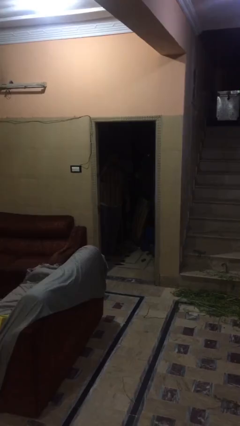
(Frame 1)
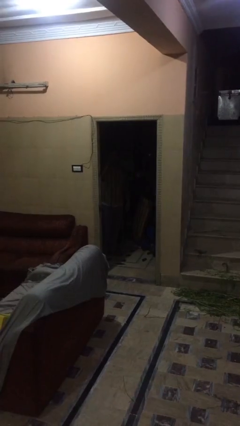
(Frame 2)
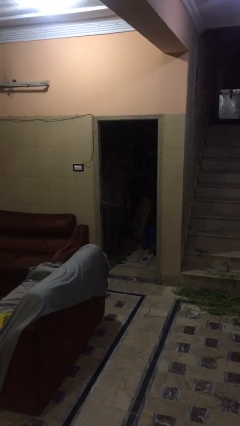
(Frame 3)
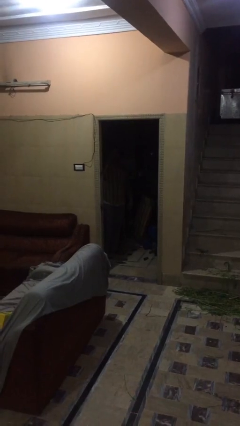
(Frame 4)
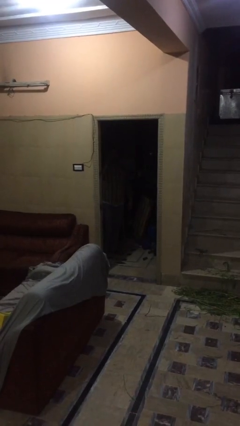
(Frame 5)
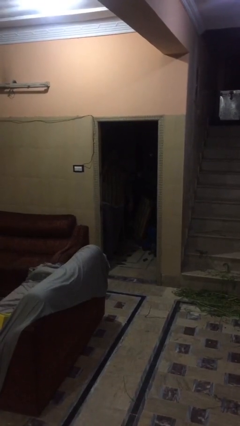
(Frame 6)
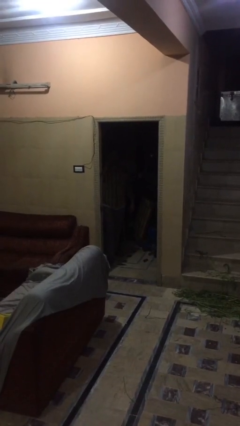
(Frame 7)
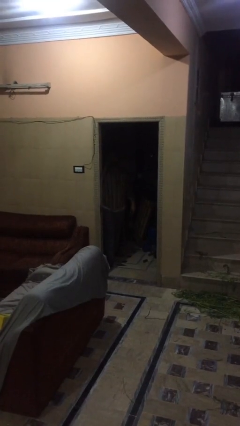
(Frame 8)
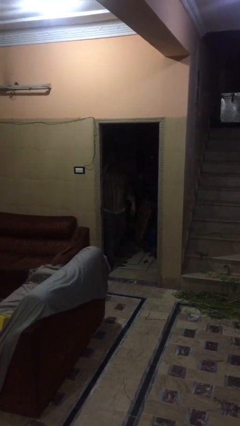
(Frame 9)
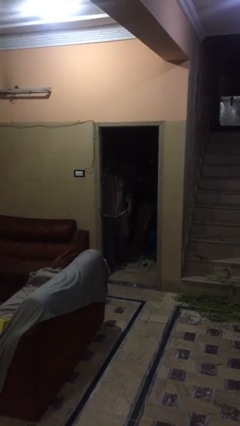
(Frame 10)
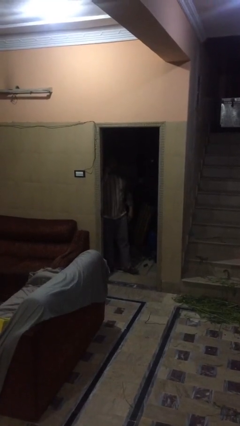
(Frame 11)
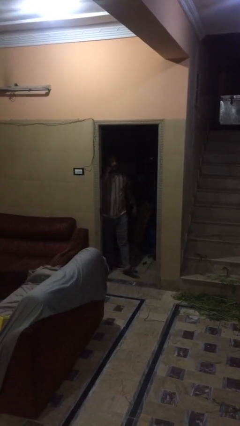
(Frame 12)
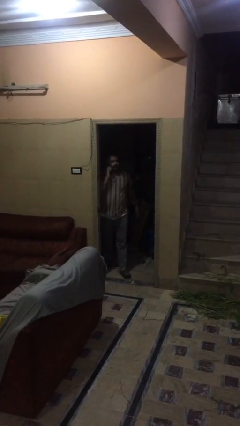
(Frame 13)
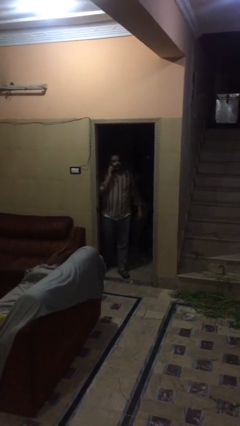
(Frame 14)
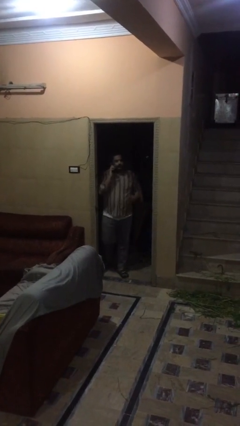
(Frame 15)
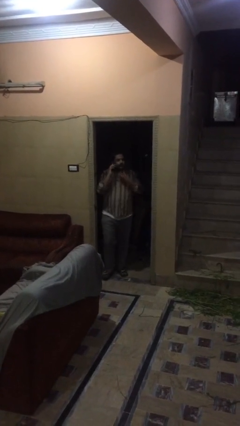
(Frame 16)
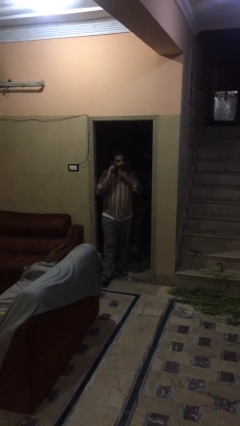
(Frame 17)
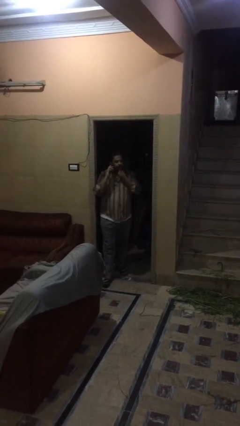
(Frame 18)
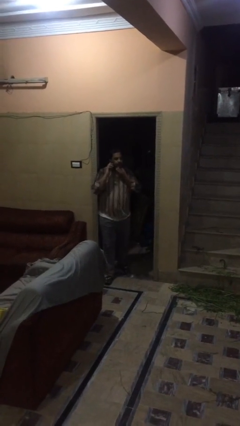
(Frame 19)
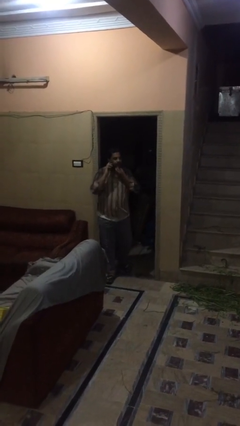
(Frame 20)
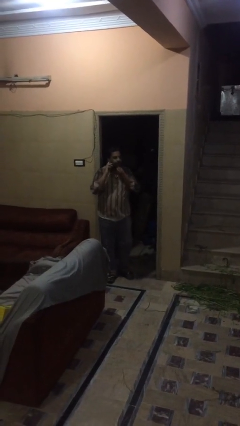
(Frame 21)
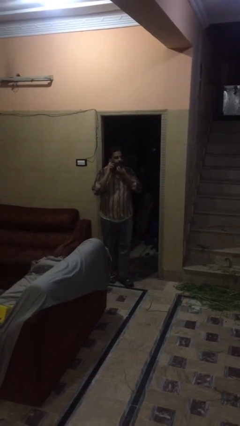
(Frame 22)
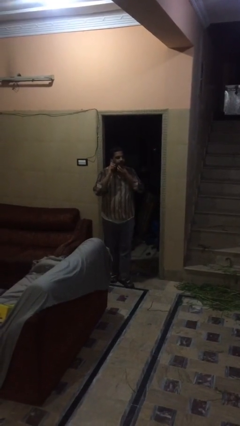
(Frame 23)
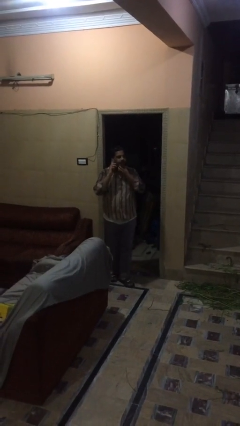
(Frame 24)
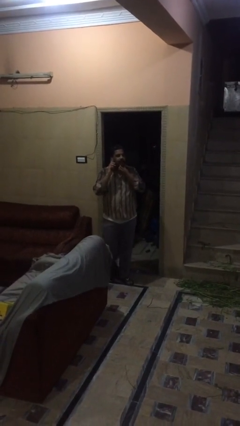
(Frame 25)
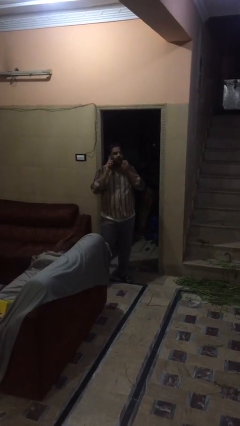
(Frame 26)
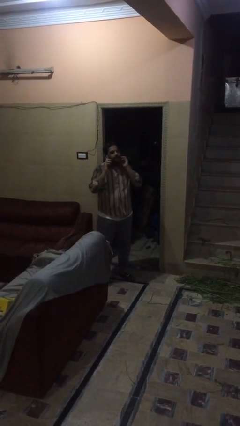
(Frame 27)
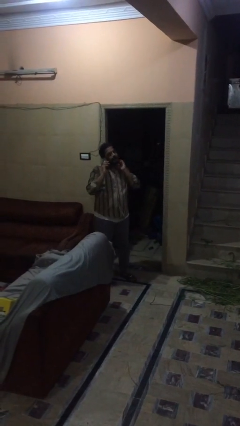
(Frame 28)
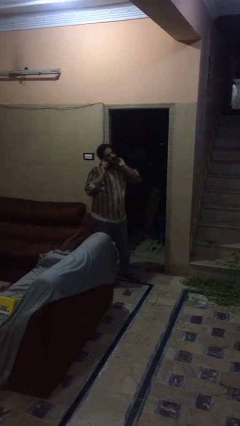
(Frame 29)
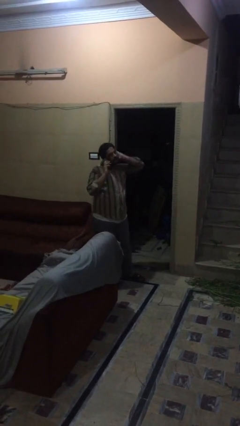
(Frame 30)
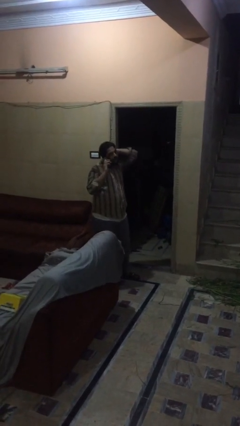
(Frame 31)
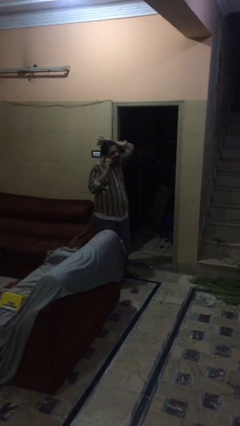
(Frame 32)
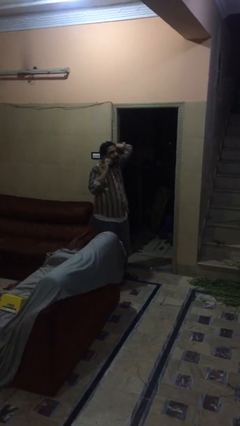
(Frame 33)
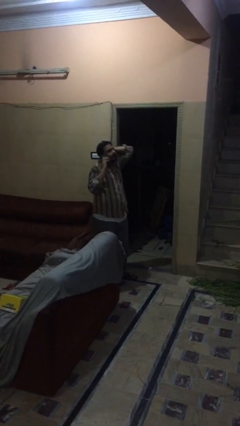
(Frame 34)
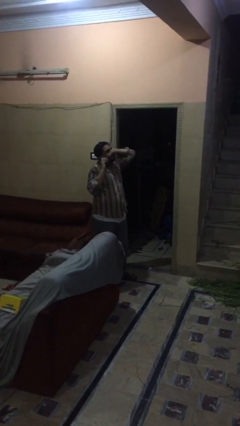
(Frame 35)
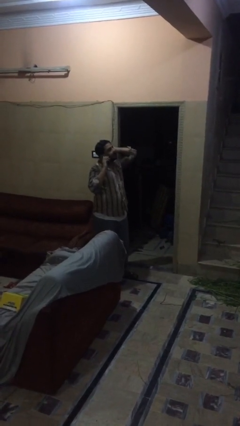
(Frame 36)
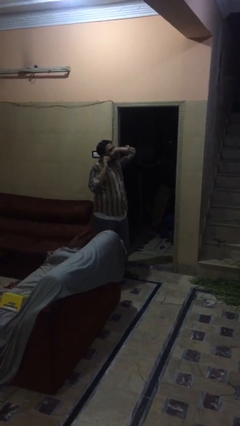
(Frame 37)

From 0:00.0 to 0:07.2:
person enters scene through structure

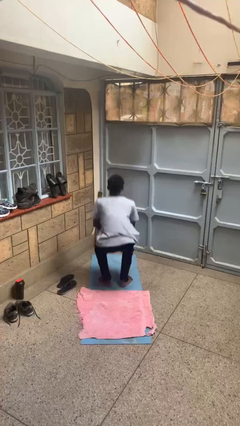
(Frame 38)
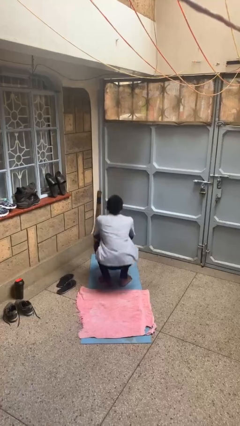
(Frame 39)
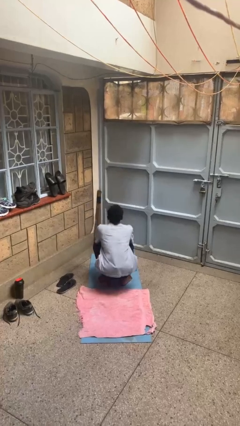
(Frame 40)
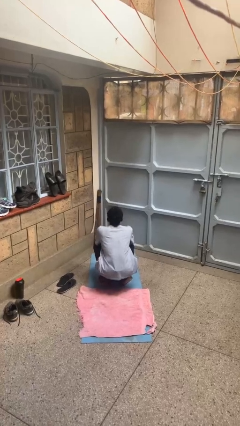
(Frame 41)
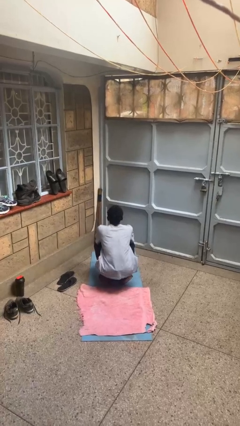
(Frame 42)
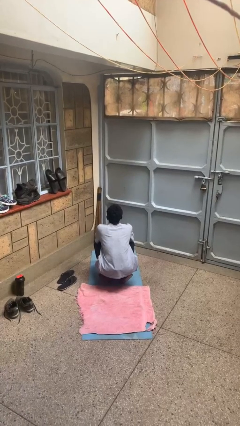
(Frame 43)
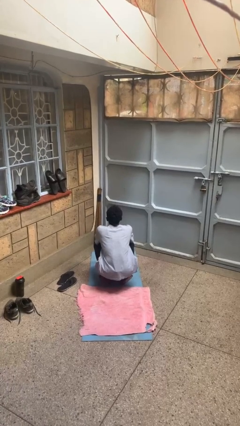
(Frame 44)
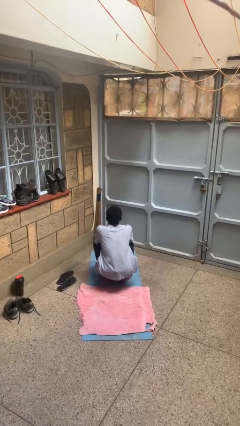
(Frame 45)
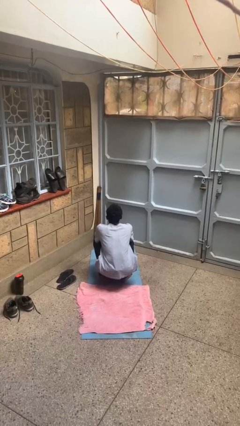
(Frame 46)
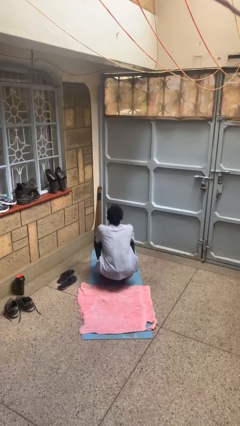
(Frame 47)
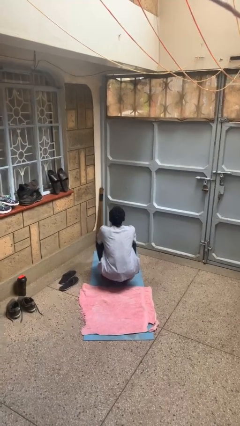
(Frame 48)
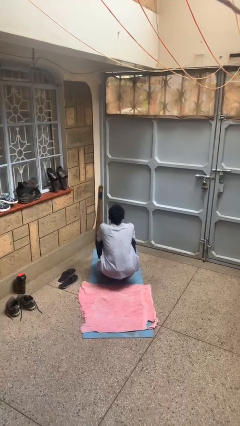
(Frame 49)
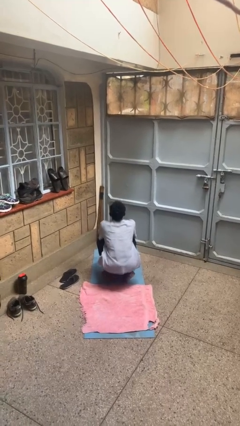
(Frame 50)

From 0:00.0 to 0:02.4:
person squats

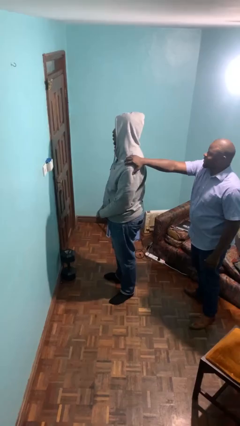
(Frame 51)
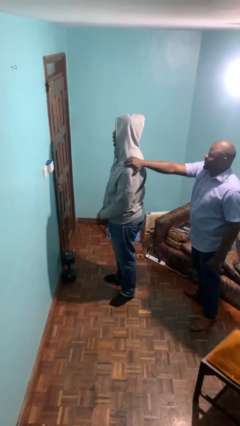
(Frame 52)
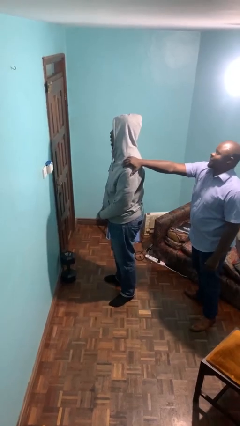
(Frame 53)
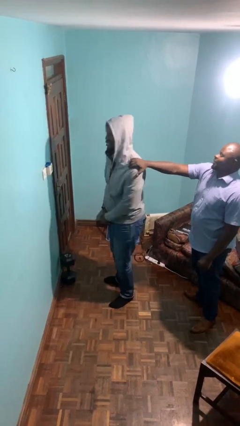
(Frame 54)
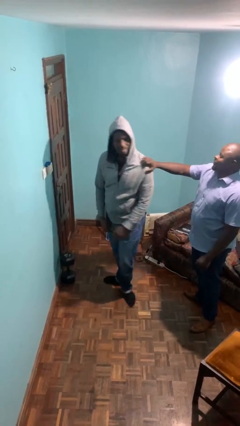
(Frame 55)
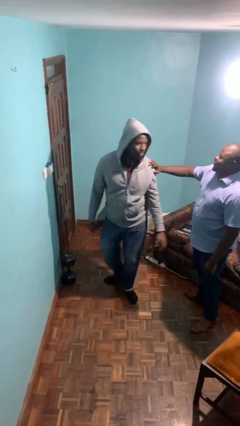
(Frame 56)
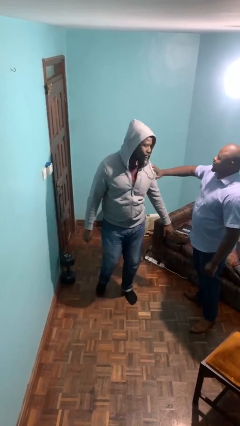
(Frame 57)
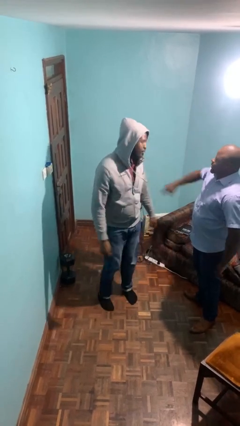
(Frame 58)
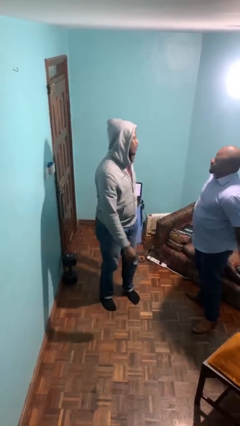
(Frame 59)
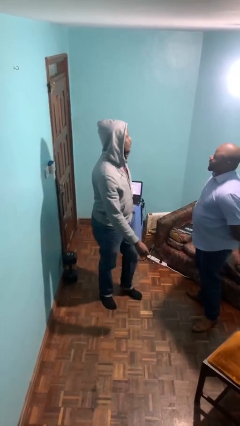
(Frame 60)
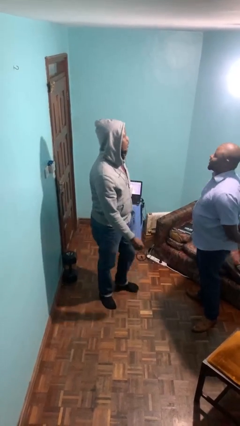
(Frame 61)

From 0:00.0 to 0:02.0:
person spins person around

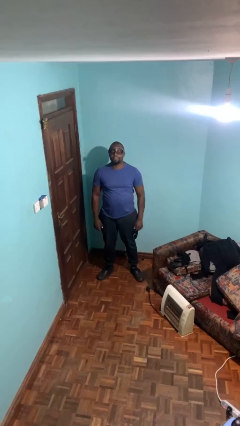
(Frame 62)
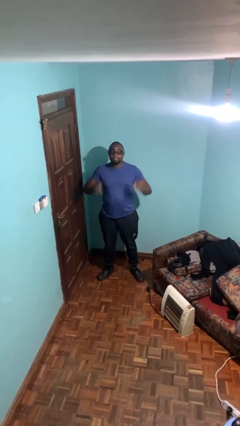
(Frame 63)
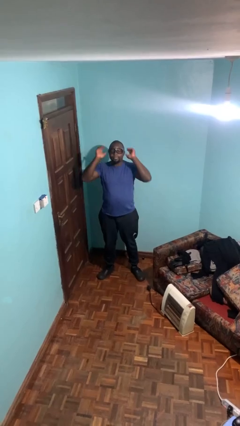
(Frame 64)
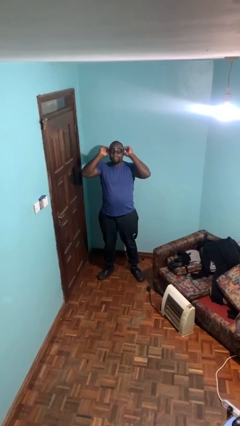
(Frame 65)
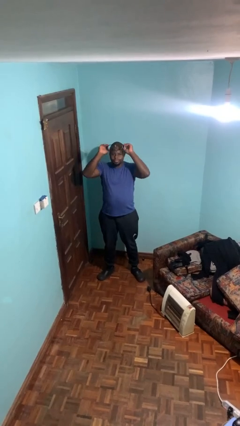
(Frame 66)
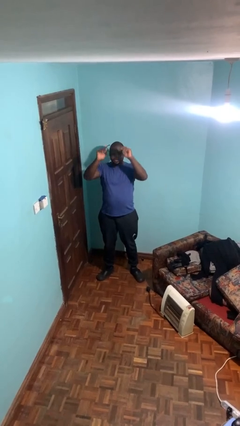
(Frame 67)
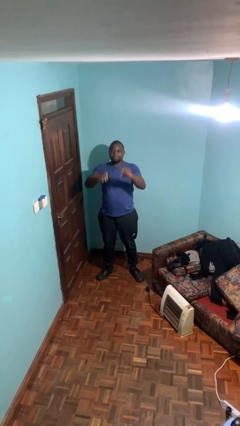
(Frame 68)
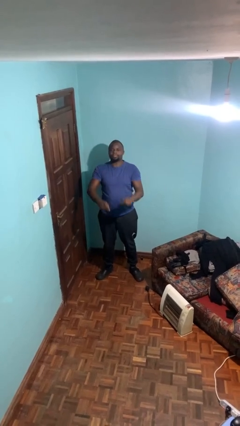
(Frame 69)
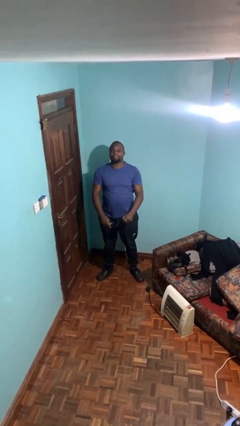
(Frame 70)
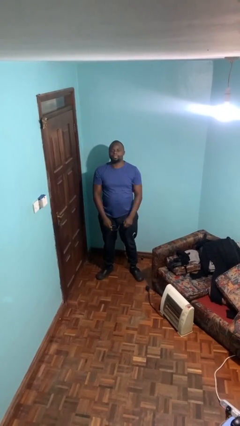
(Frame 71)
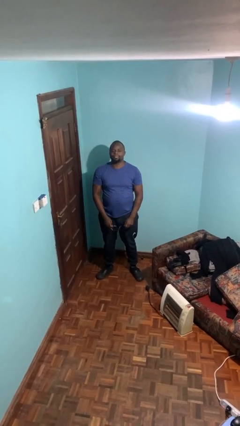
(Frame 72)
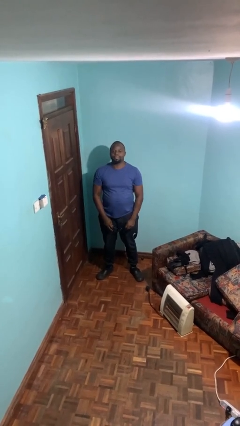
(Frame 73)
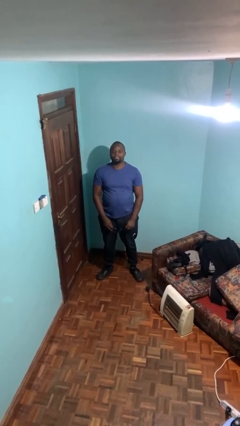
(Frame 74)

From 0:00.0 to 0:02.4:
person takes off glasses

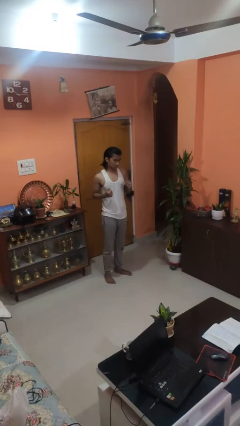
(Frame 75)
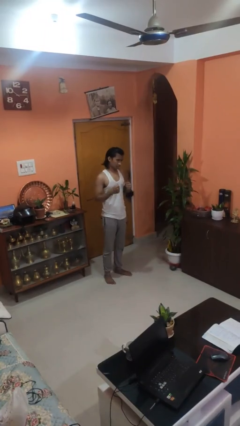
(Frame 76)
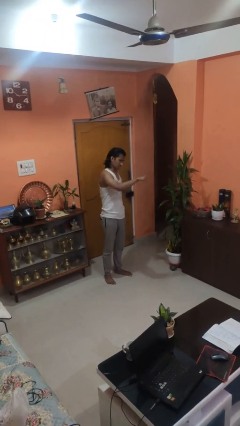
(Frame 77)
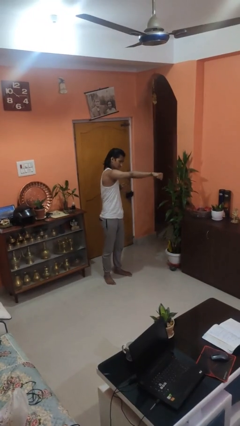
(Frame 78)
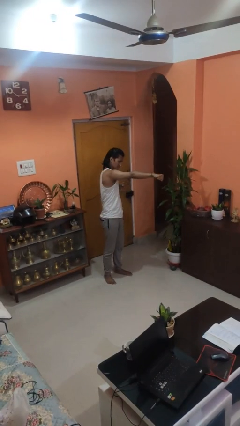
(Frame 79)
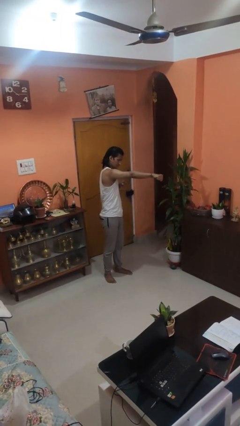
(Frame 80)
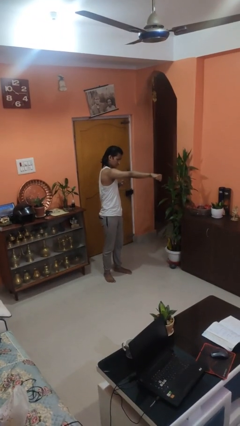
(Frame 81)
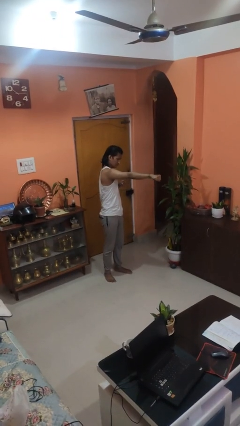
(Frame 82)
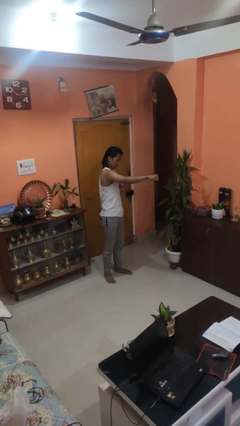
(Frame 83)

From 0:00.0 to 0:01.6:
person punches

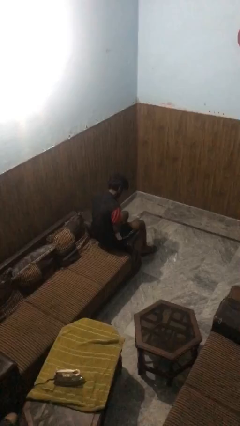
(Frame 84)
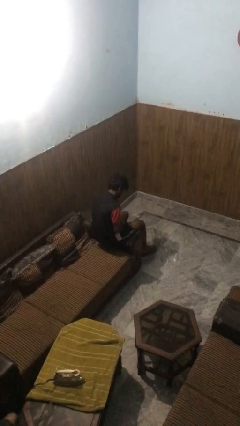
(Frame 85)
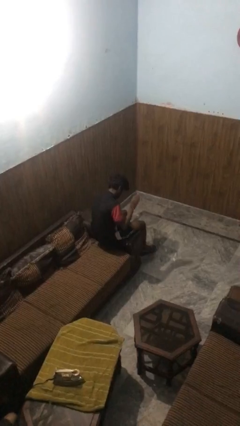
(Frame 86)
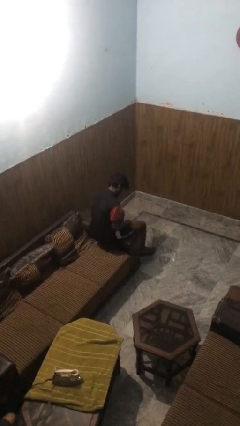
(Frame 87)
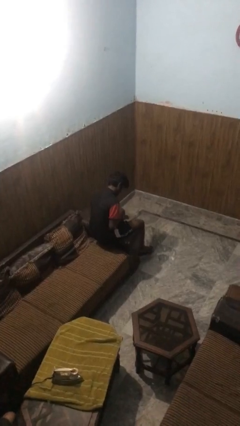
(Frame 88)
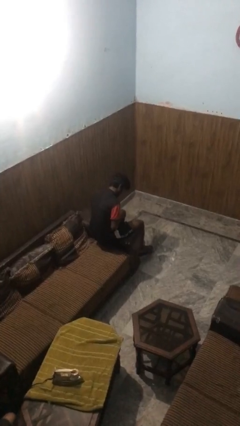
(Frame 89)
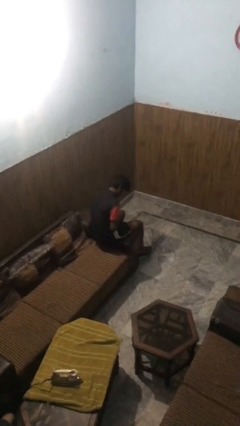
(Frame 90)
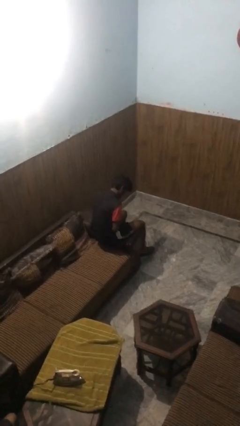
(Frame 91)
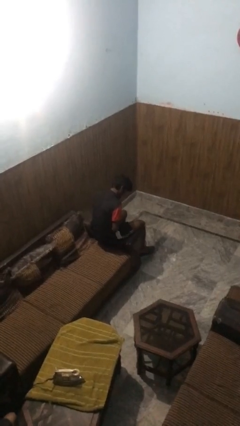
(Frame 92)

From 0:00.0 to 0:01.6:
person swats bug

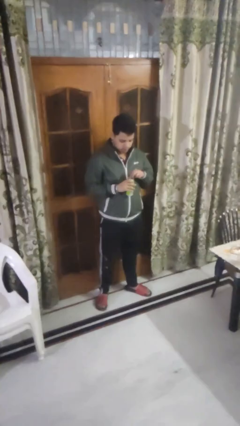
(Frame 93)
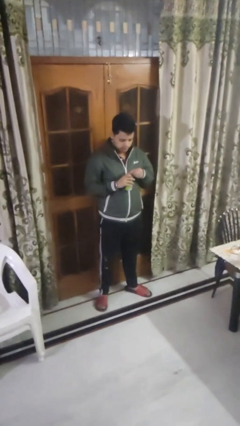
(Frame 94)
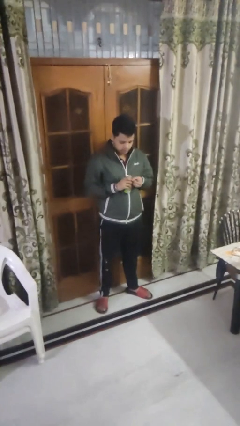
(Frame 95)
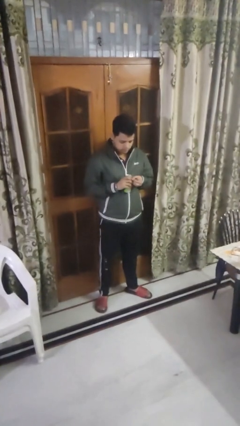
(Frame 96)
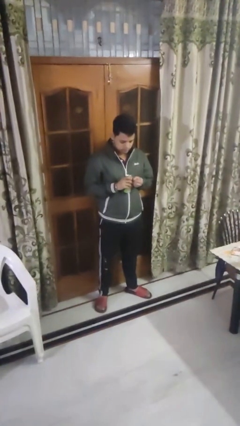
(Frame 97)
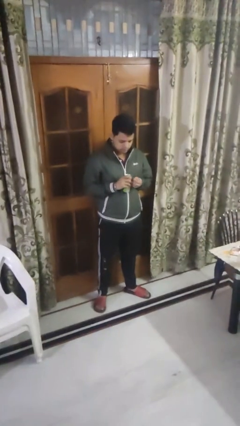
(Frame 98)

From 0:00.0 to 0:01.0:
person opens beverage can
